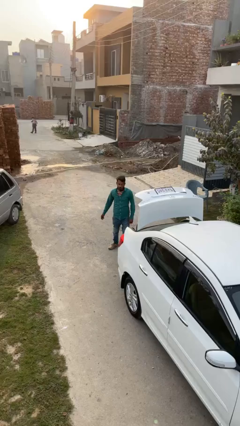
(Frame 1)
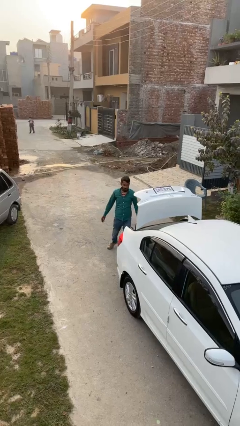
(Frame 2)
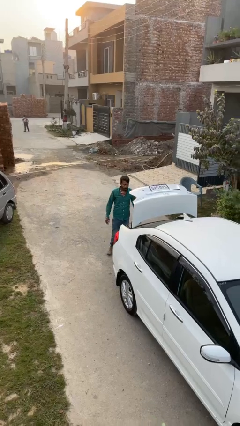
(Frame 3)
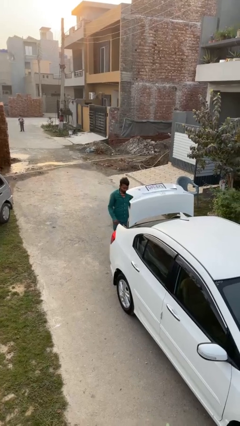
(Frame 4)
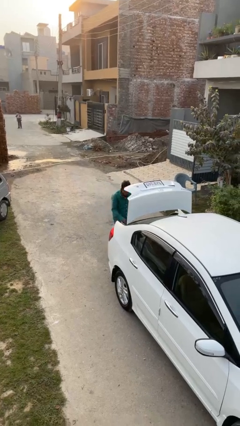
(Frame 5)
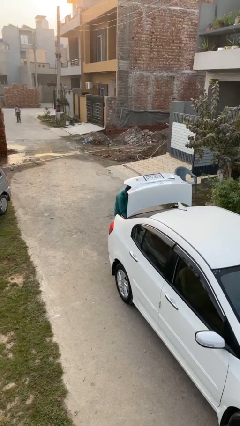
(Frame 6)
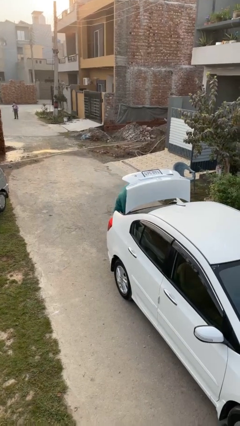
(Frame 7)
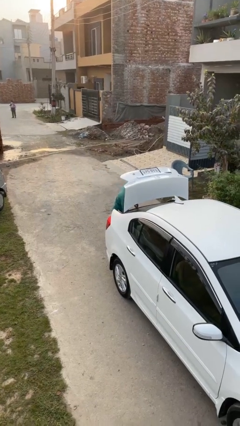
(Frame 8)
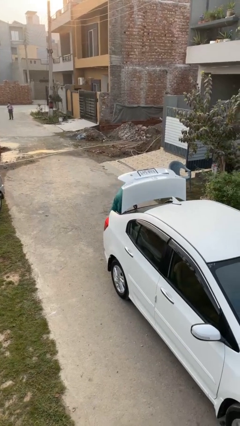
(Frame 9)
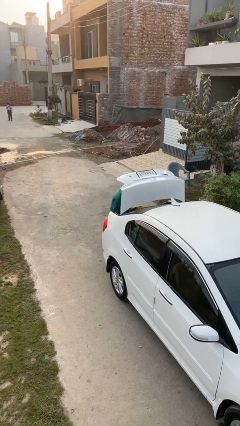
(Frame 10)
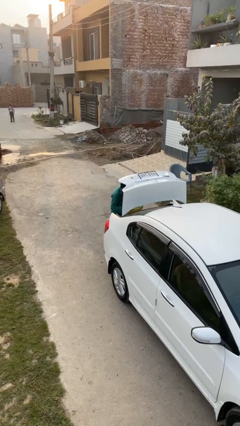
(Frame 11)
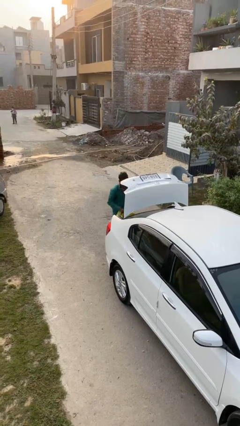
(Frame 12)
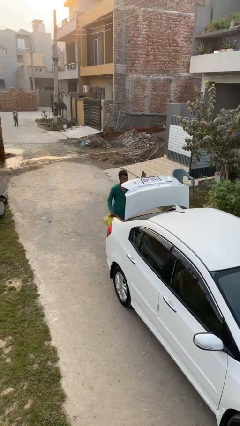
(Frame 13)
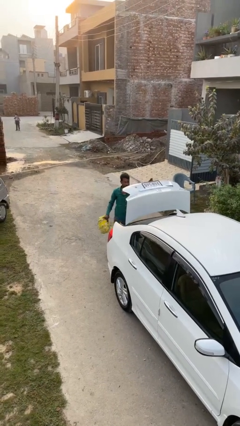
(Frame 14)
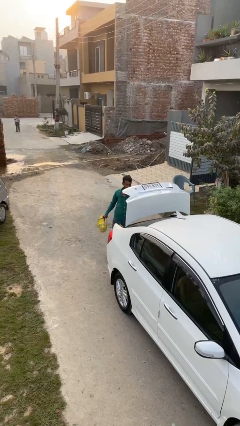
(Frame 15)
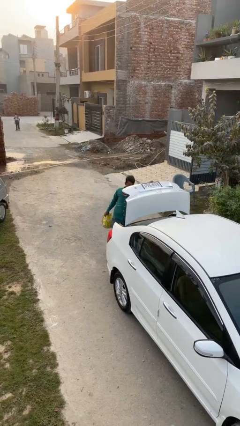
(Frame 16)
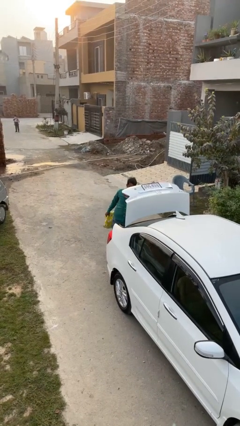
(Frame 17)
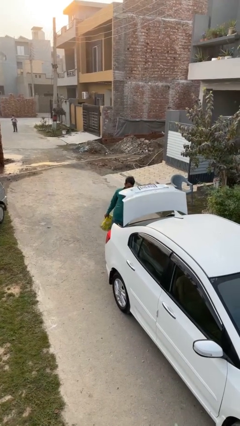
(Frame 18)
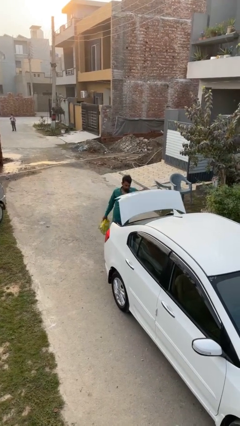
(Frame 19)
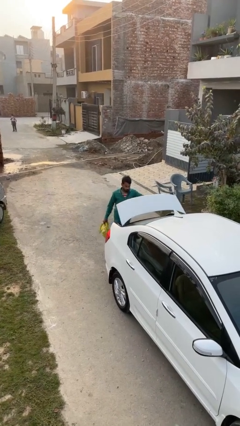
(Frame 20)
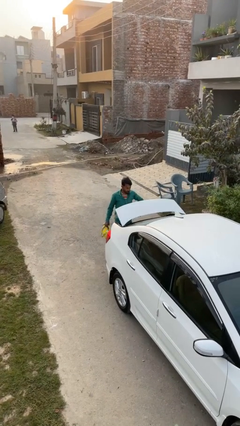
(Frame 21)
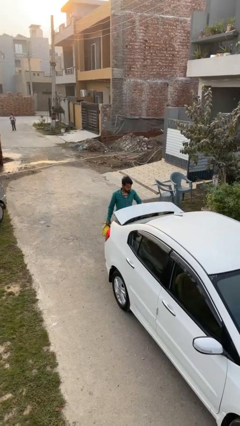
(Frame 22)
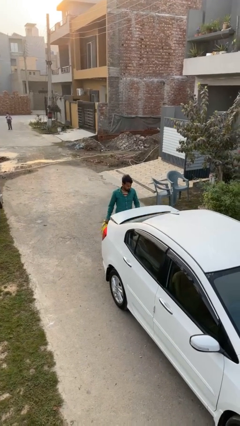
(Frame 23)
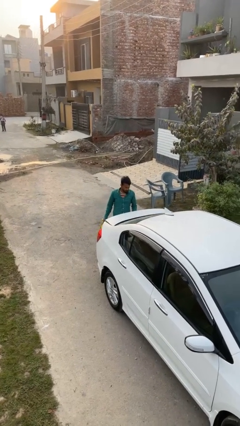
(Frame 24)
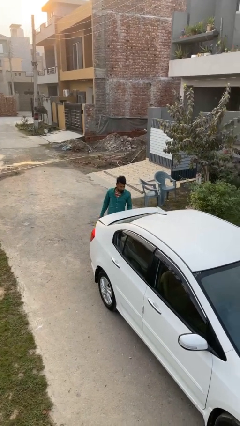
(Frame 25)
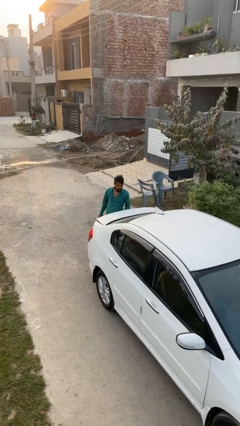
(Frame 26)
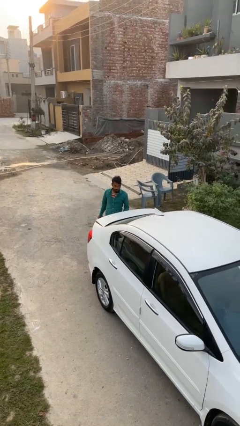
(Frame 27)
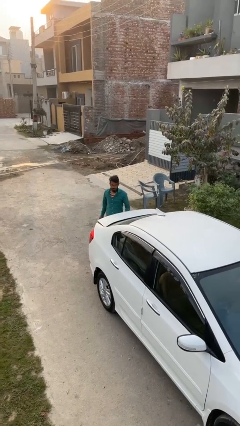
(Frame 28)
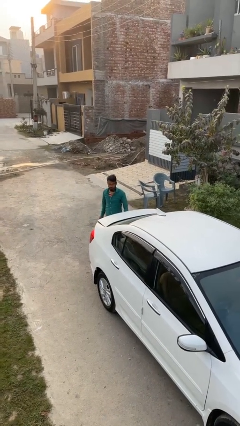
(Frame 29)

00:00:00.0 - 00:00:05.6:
person unloads car

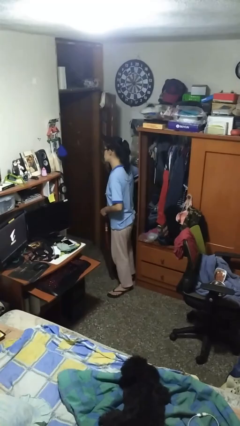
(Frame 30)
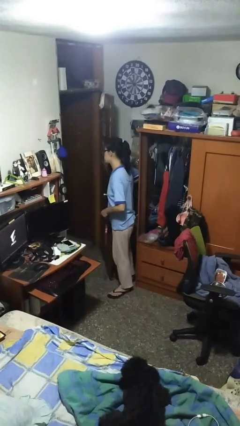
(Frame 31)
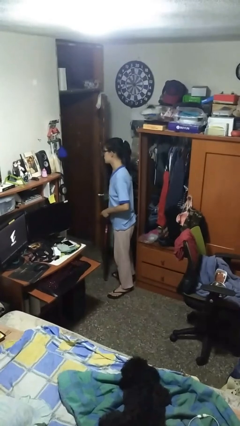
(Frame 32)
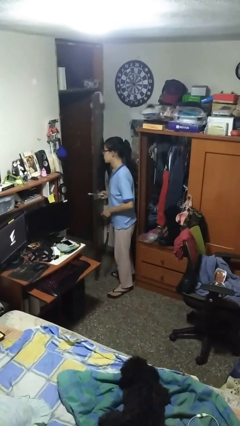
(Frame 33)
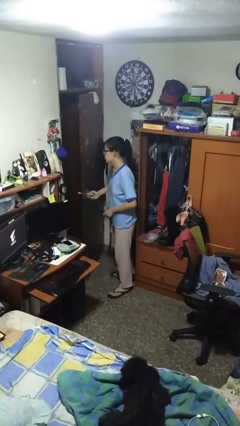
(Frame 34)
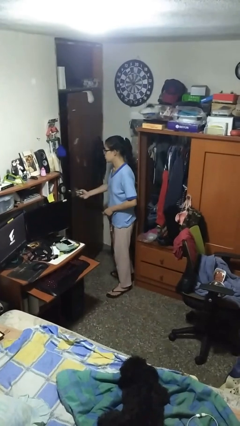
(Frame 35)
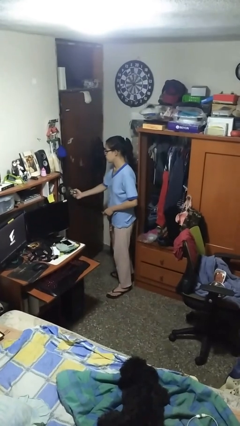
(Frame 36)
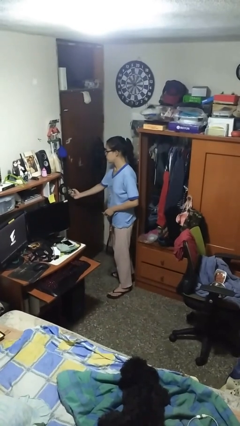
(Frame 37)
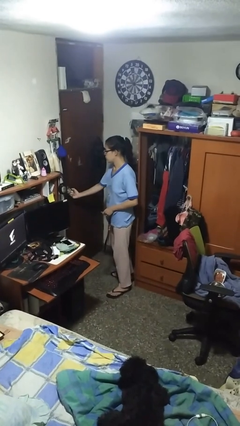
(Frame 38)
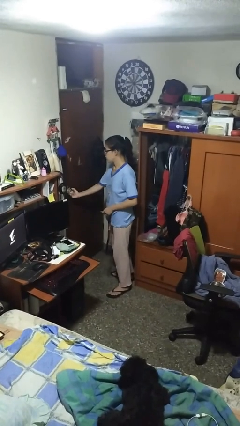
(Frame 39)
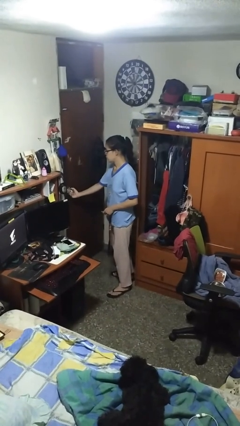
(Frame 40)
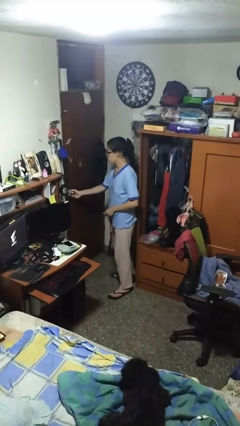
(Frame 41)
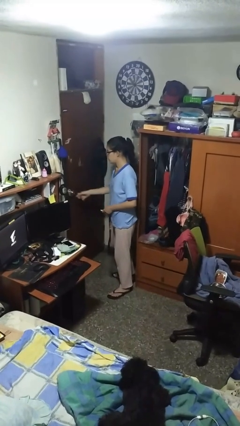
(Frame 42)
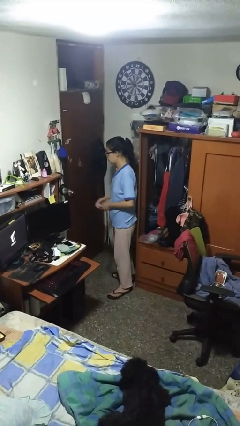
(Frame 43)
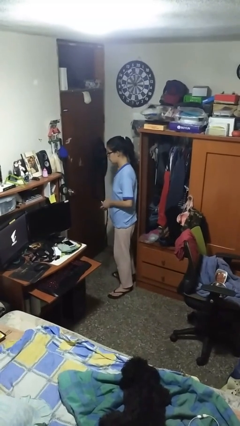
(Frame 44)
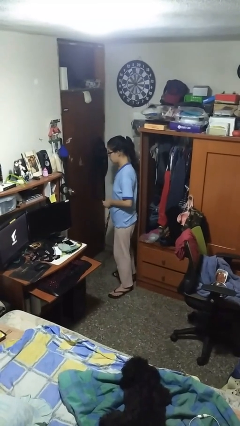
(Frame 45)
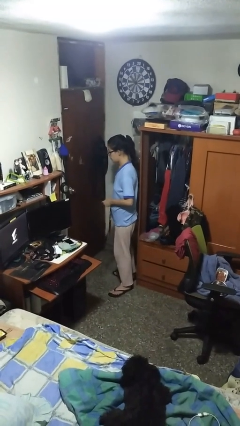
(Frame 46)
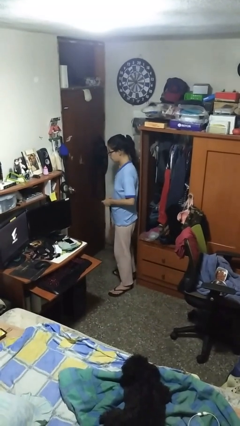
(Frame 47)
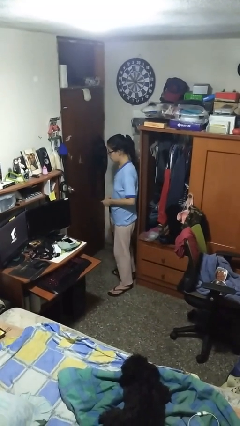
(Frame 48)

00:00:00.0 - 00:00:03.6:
person closes facility door

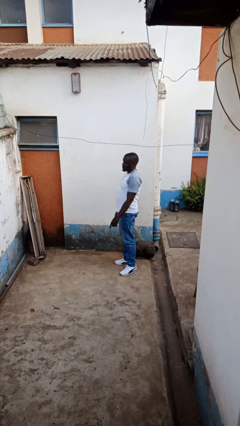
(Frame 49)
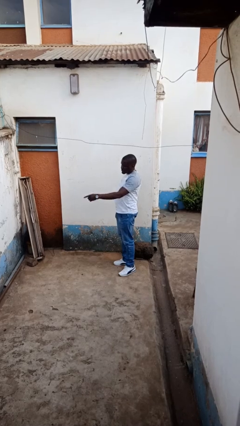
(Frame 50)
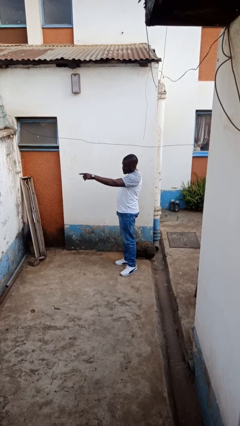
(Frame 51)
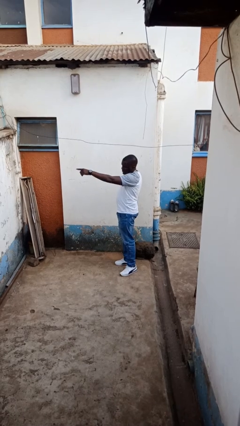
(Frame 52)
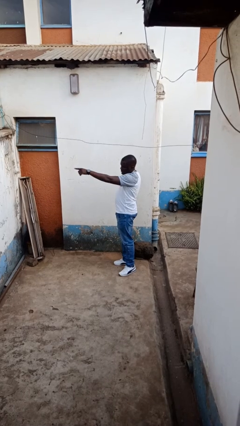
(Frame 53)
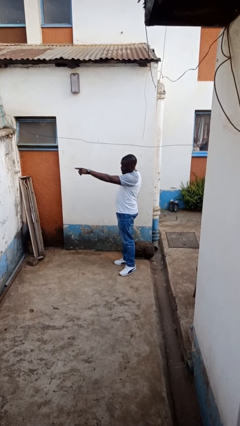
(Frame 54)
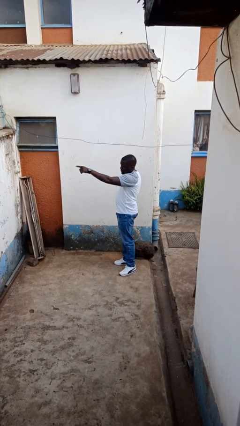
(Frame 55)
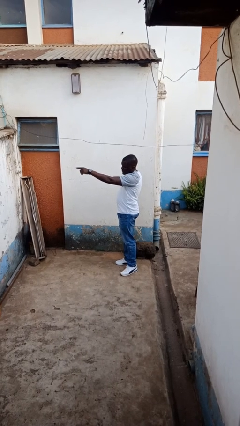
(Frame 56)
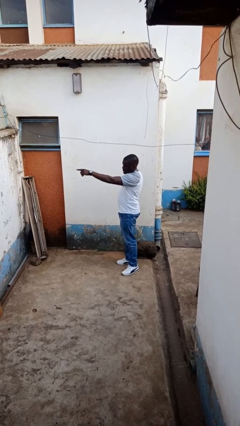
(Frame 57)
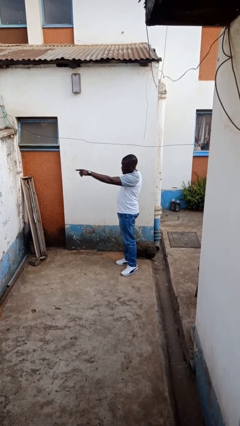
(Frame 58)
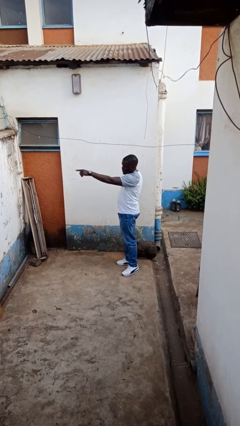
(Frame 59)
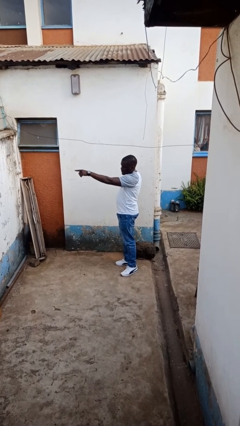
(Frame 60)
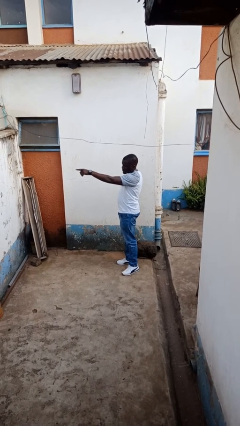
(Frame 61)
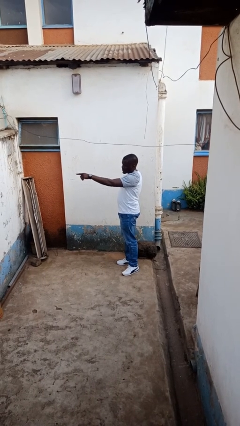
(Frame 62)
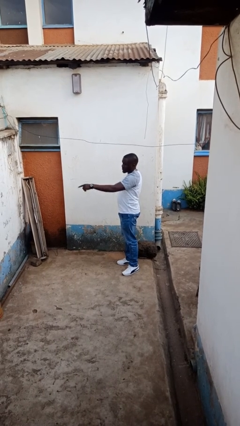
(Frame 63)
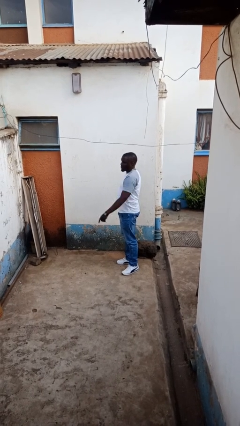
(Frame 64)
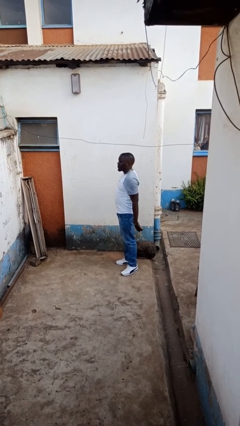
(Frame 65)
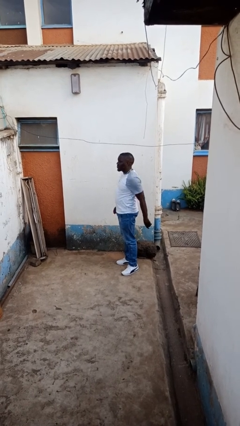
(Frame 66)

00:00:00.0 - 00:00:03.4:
person points at person

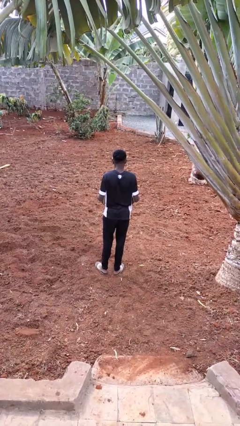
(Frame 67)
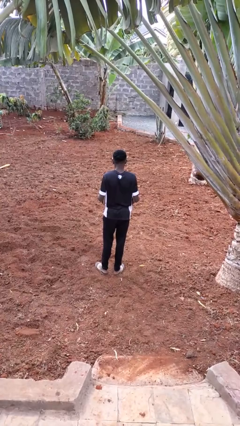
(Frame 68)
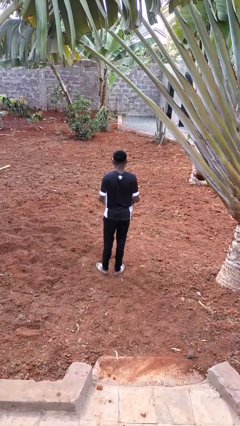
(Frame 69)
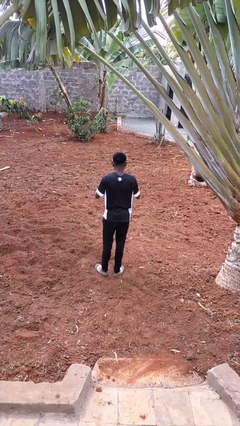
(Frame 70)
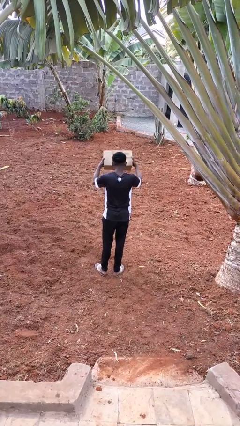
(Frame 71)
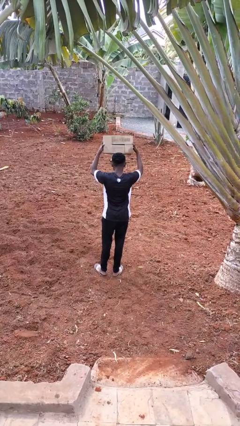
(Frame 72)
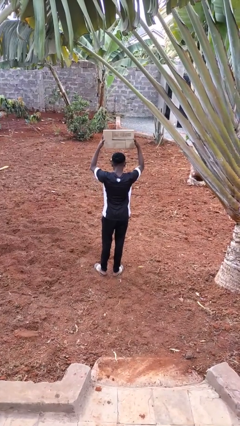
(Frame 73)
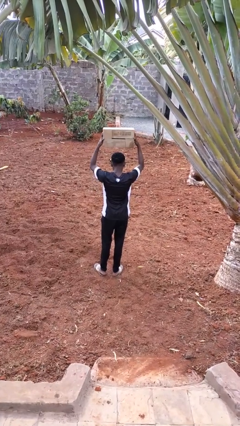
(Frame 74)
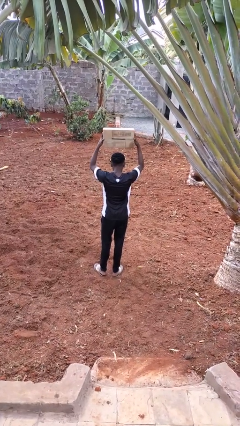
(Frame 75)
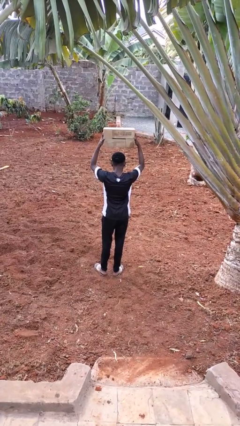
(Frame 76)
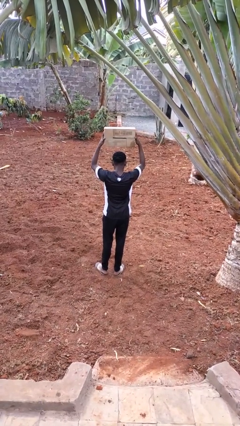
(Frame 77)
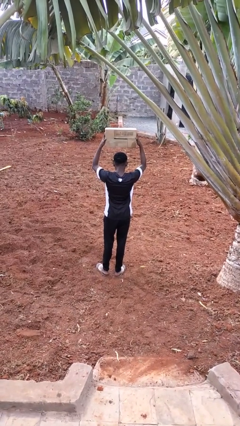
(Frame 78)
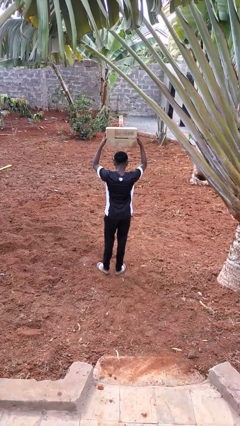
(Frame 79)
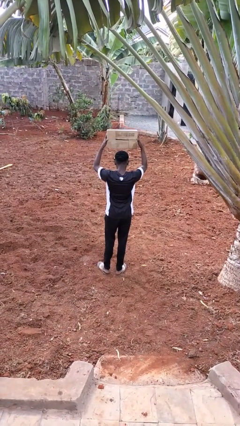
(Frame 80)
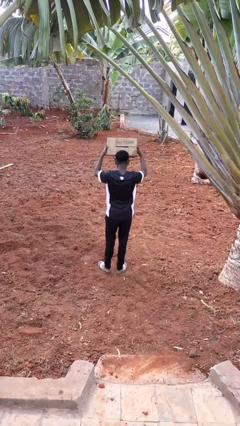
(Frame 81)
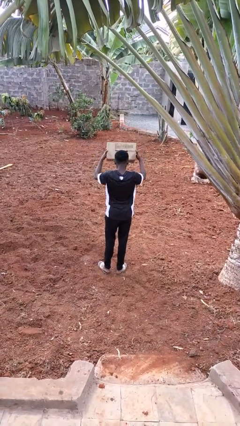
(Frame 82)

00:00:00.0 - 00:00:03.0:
person holds object above head

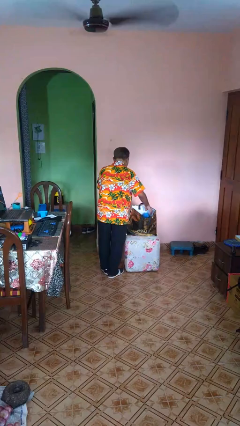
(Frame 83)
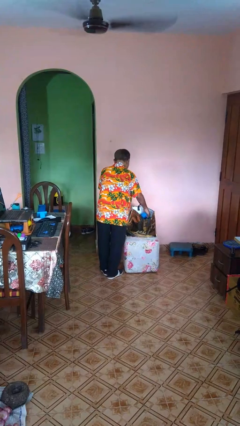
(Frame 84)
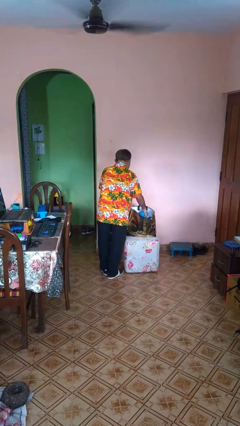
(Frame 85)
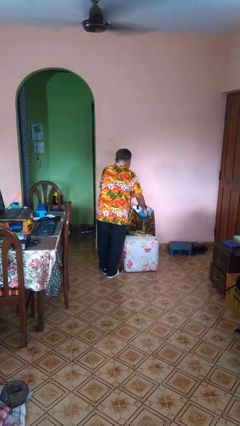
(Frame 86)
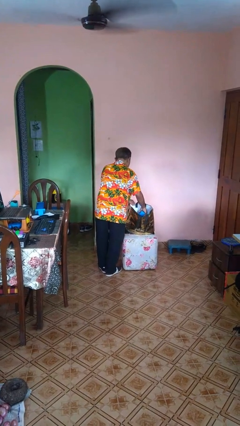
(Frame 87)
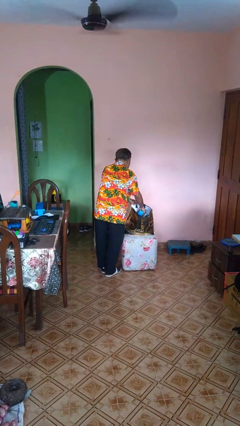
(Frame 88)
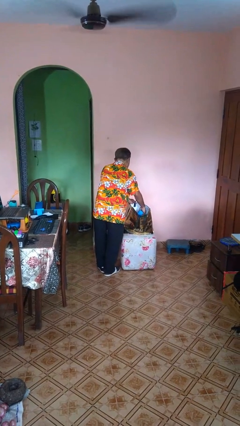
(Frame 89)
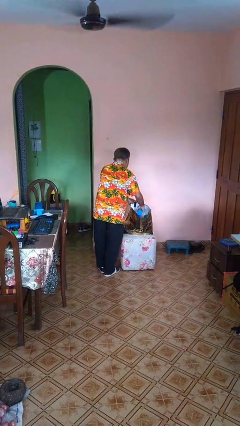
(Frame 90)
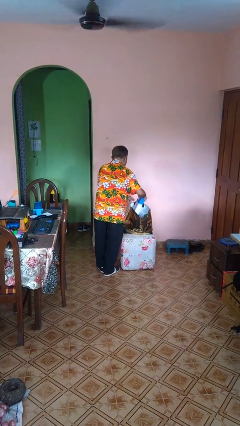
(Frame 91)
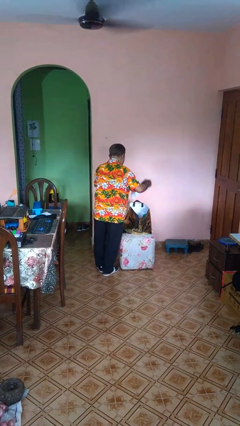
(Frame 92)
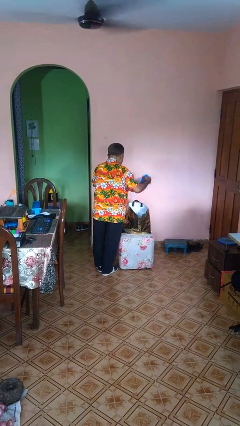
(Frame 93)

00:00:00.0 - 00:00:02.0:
person takes object from bag

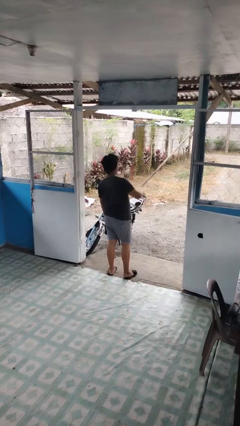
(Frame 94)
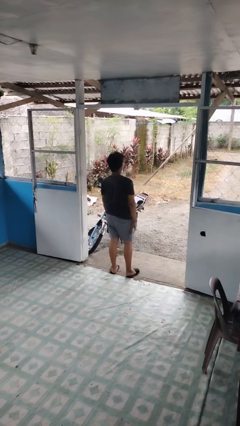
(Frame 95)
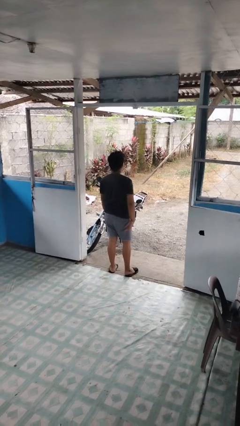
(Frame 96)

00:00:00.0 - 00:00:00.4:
person gestures lower hand
